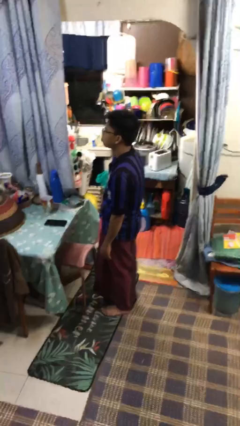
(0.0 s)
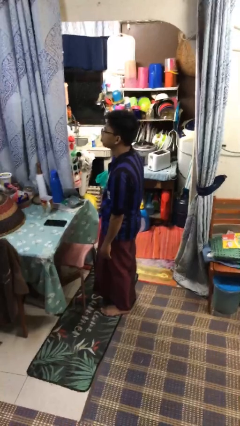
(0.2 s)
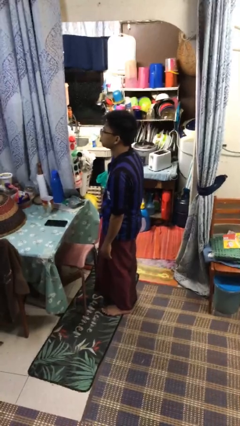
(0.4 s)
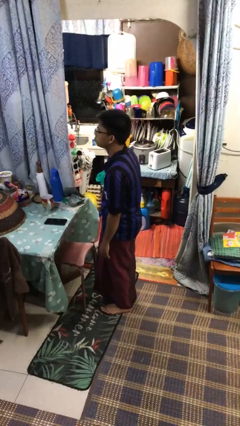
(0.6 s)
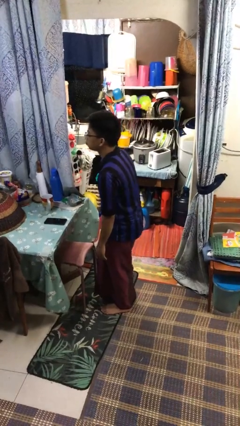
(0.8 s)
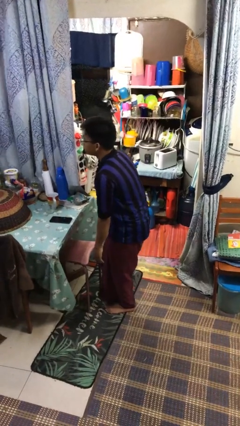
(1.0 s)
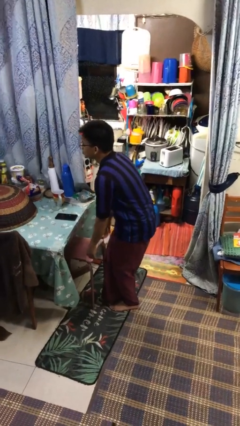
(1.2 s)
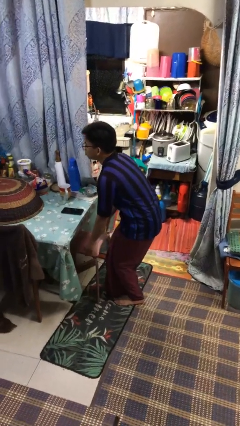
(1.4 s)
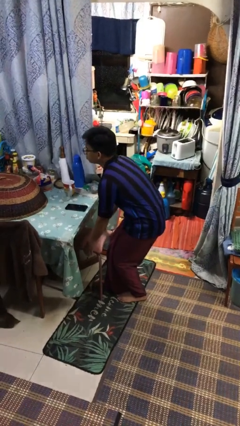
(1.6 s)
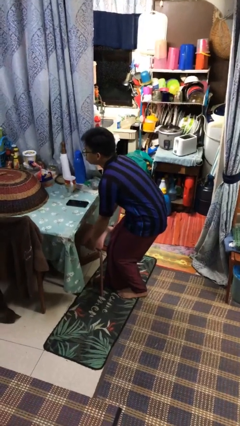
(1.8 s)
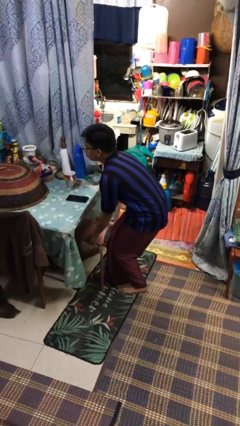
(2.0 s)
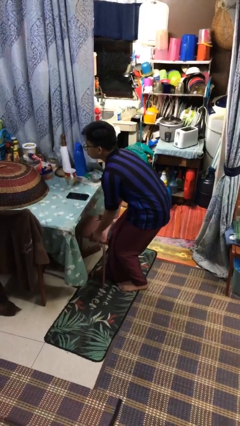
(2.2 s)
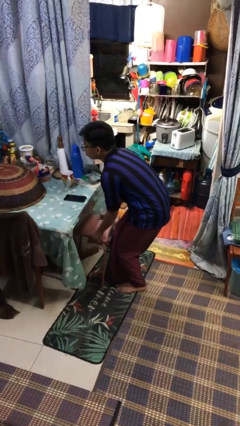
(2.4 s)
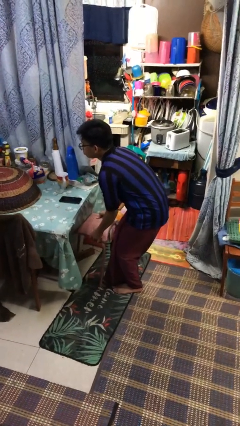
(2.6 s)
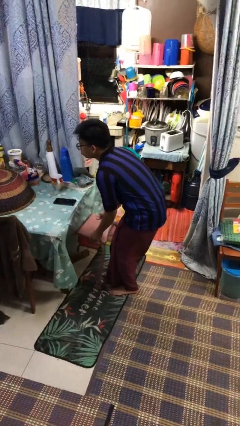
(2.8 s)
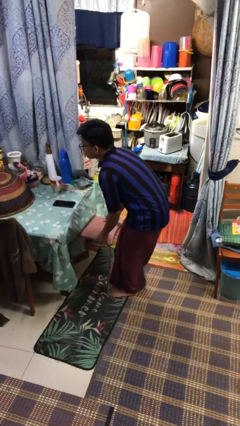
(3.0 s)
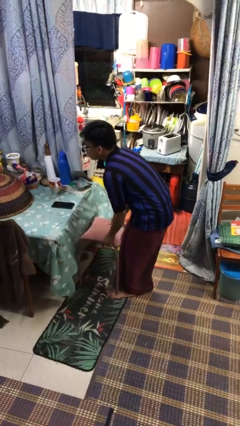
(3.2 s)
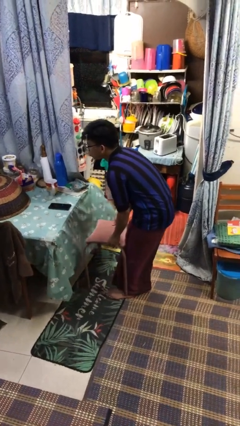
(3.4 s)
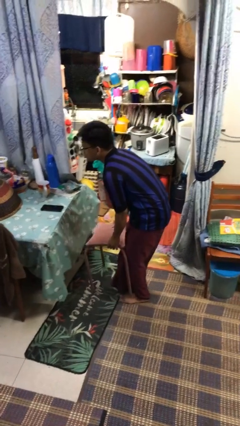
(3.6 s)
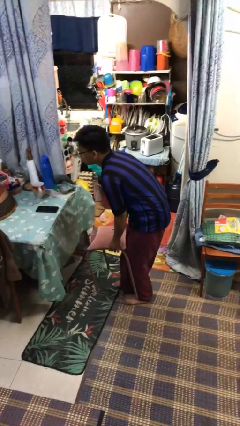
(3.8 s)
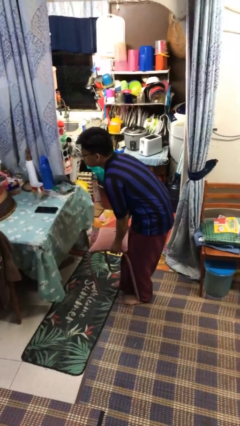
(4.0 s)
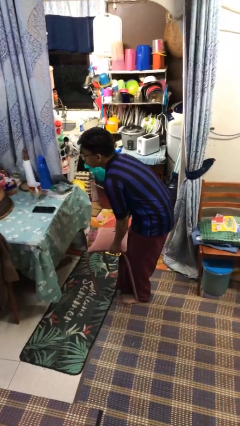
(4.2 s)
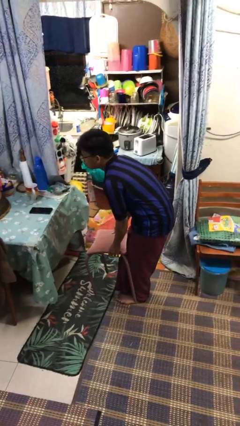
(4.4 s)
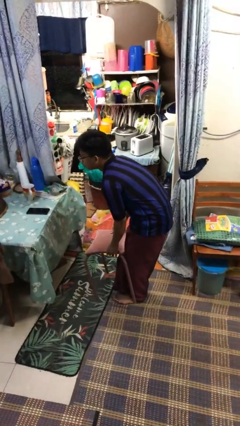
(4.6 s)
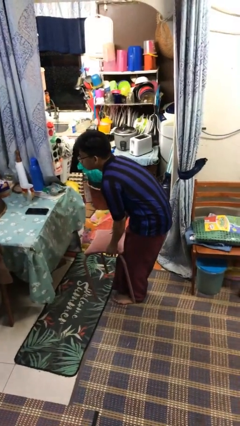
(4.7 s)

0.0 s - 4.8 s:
person pulls out chair

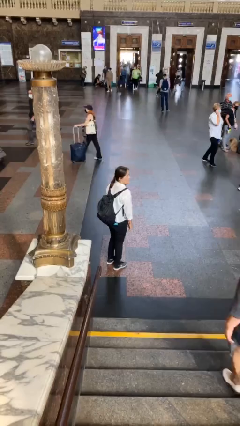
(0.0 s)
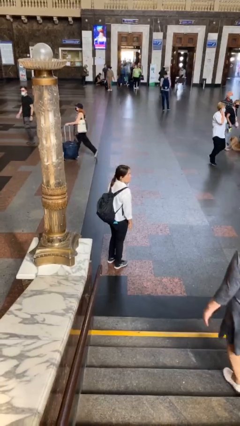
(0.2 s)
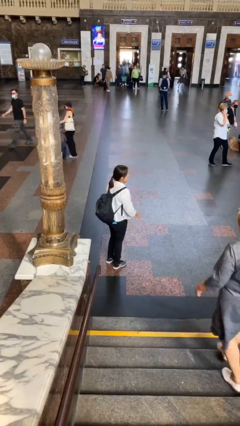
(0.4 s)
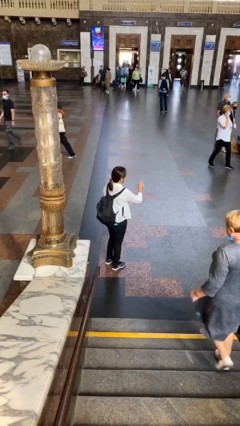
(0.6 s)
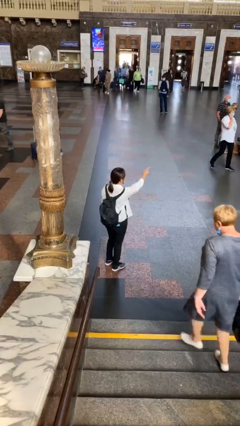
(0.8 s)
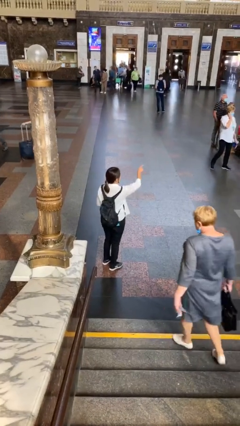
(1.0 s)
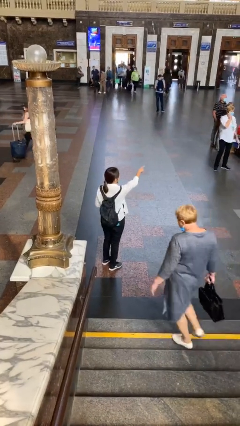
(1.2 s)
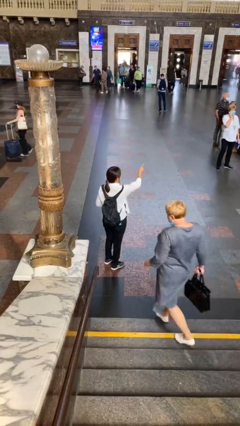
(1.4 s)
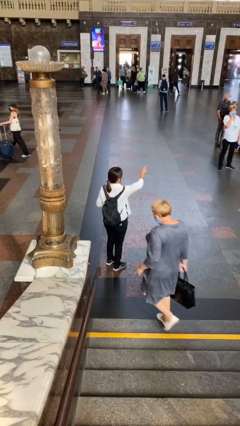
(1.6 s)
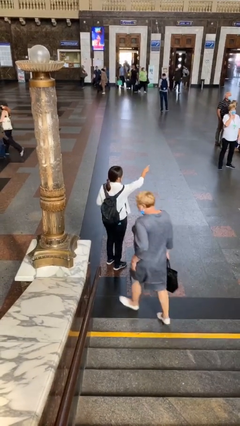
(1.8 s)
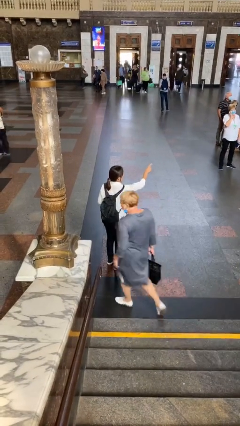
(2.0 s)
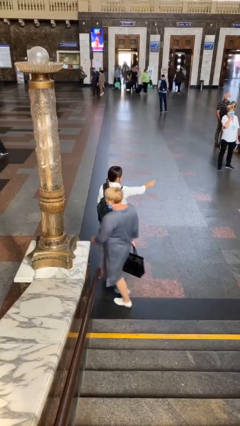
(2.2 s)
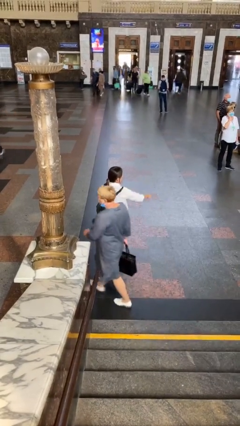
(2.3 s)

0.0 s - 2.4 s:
person points at person

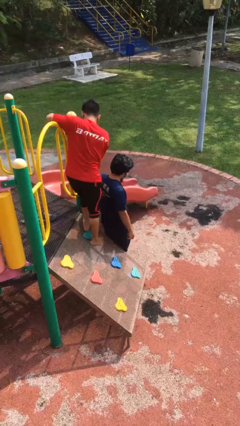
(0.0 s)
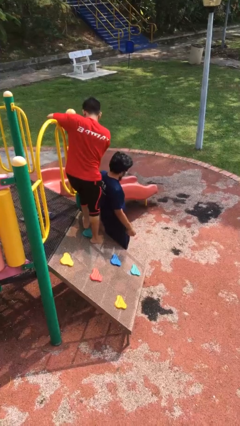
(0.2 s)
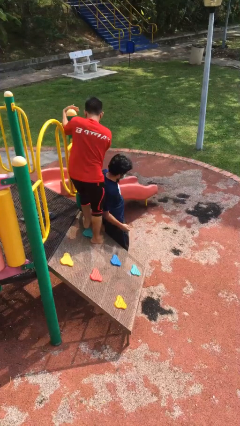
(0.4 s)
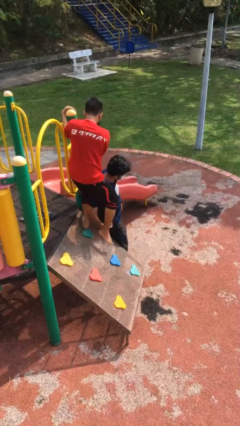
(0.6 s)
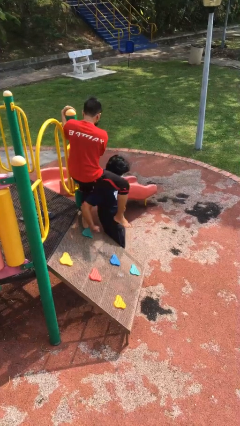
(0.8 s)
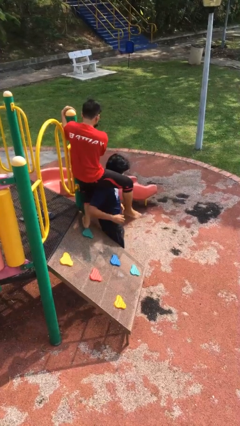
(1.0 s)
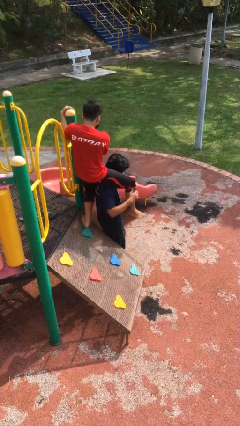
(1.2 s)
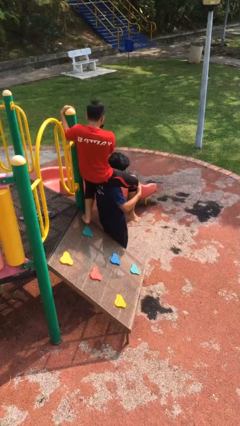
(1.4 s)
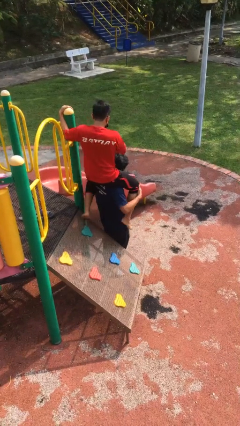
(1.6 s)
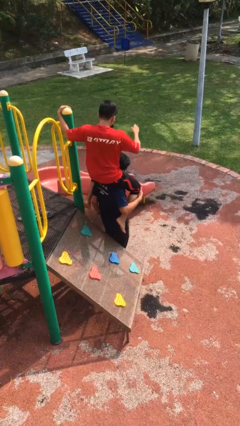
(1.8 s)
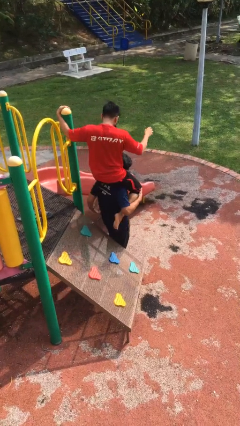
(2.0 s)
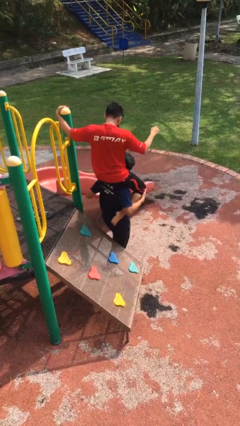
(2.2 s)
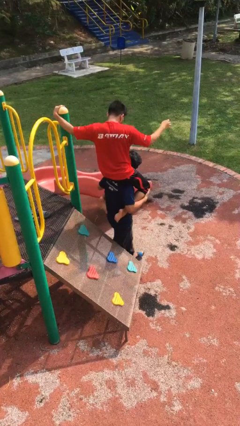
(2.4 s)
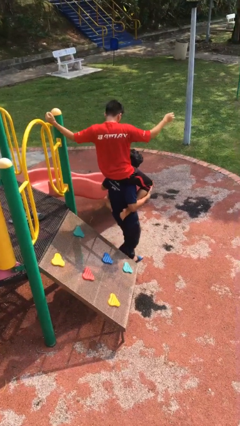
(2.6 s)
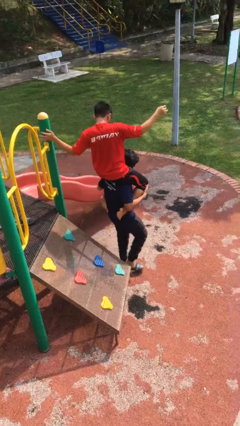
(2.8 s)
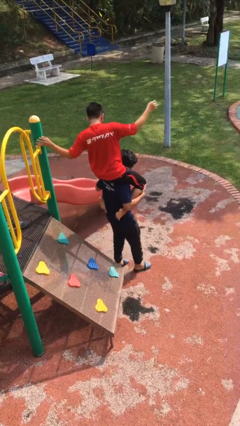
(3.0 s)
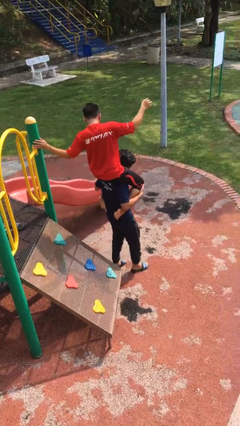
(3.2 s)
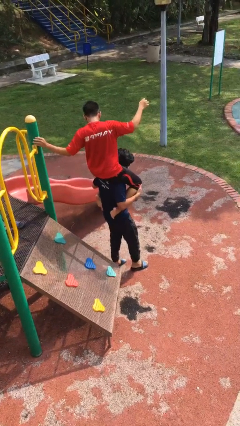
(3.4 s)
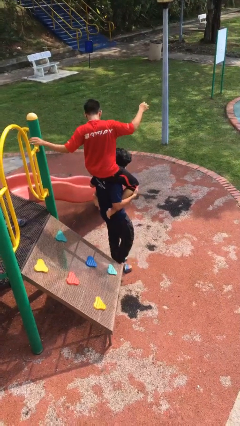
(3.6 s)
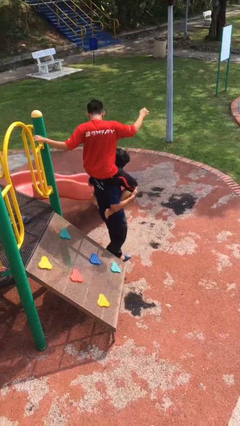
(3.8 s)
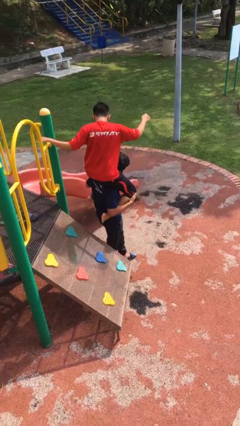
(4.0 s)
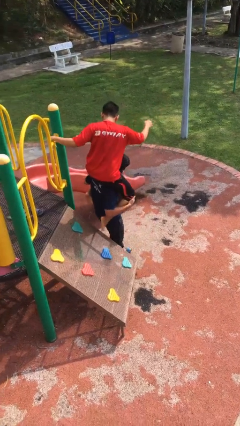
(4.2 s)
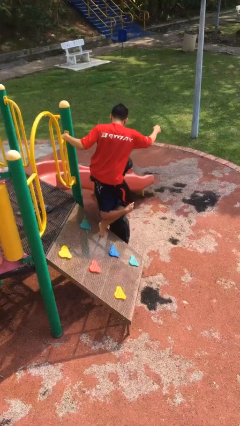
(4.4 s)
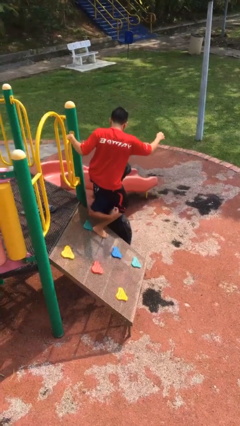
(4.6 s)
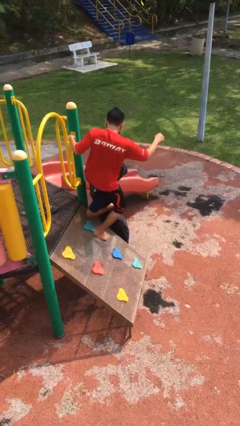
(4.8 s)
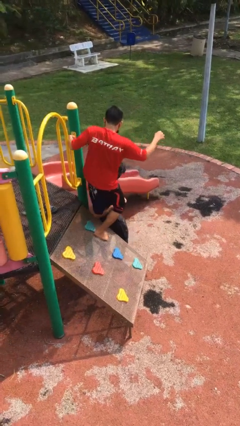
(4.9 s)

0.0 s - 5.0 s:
person carries person on shoulders

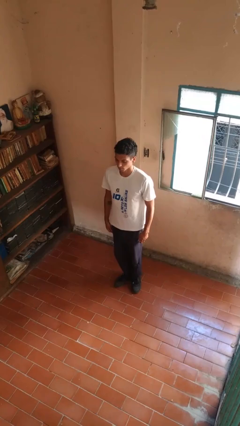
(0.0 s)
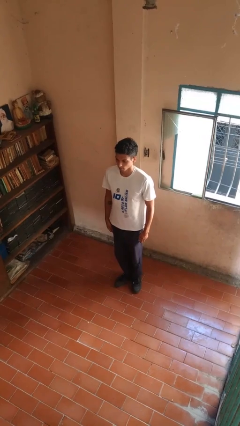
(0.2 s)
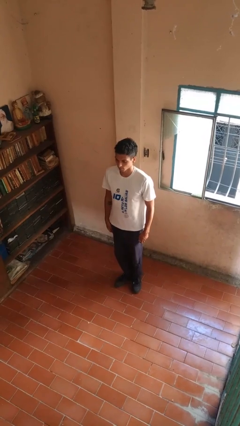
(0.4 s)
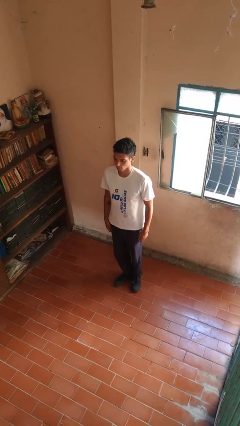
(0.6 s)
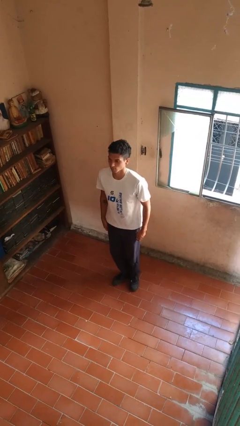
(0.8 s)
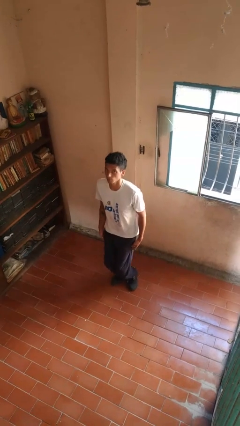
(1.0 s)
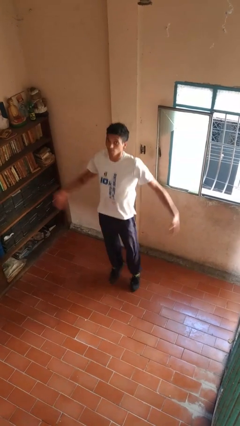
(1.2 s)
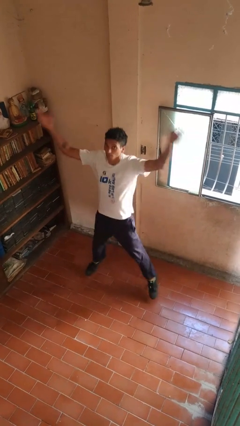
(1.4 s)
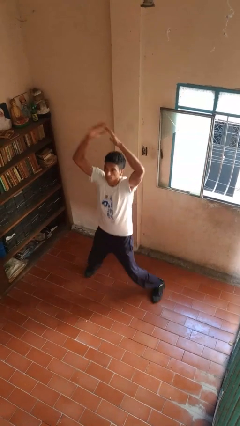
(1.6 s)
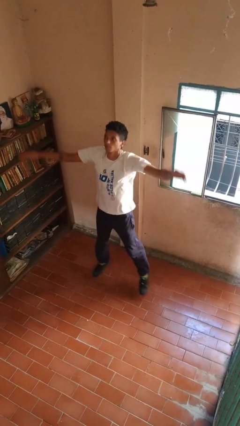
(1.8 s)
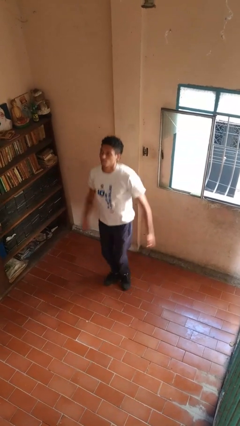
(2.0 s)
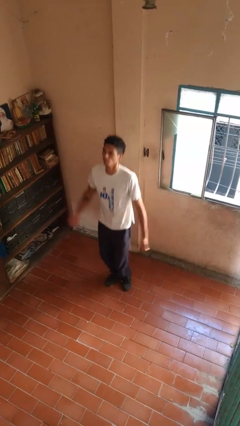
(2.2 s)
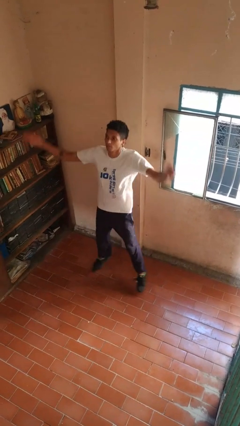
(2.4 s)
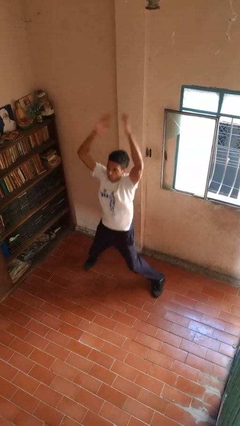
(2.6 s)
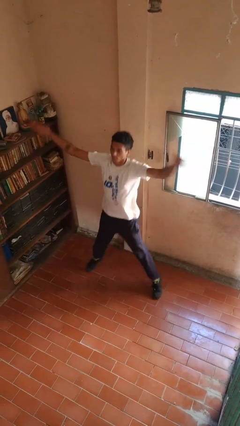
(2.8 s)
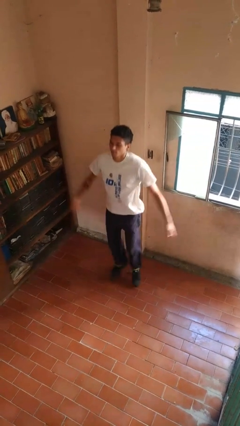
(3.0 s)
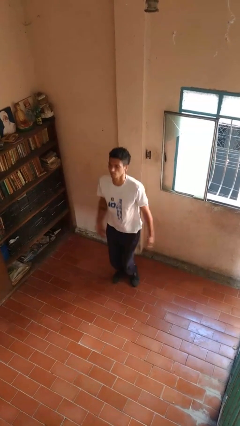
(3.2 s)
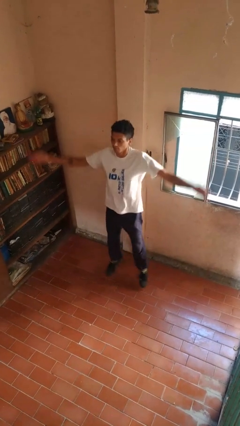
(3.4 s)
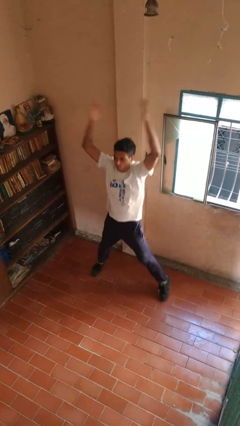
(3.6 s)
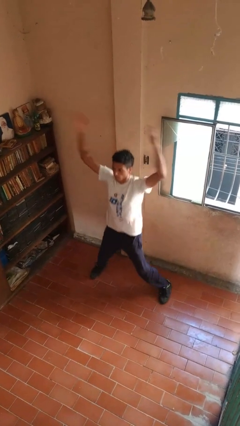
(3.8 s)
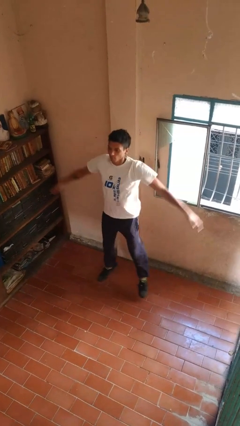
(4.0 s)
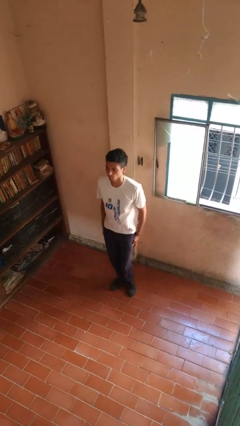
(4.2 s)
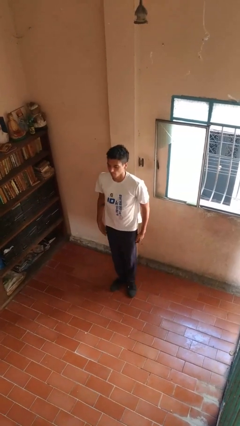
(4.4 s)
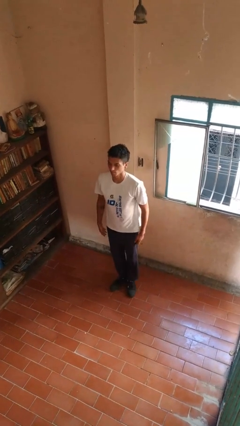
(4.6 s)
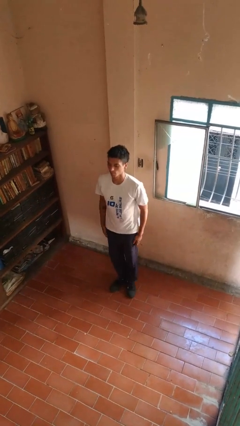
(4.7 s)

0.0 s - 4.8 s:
person exercises with jumping jacks

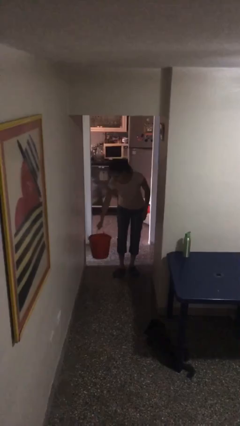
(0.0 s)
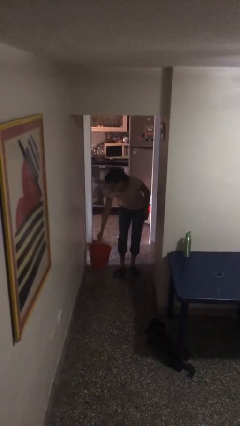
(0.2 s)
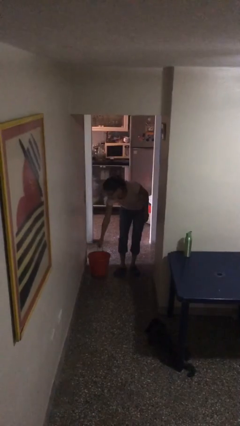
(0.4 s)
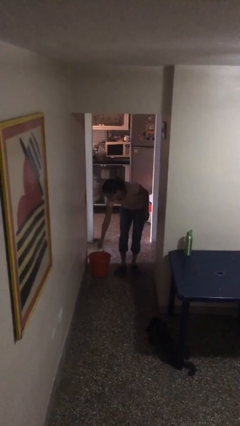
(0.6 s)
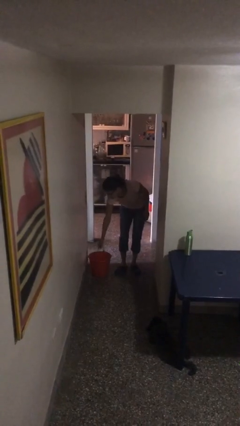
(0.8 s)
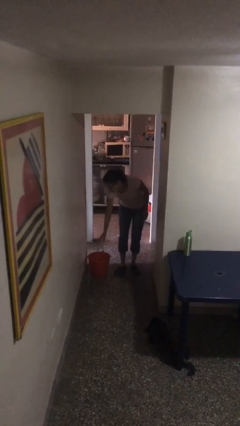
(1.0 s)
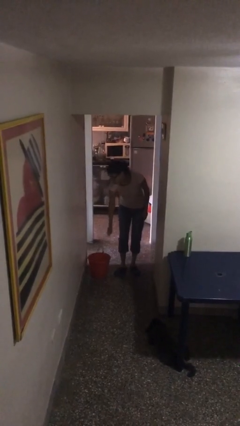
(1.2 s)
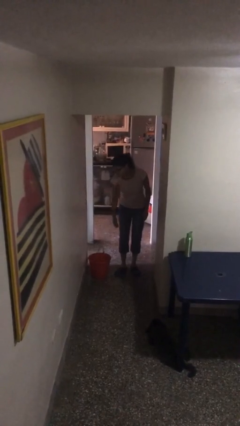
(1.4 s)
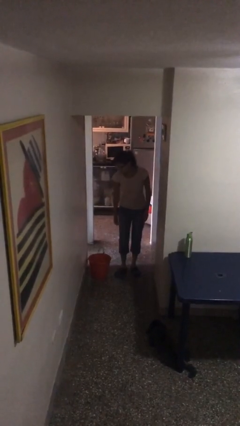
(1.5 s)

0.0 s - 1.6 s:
person puts down object on floor
